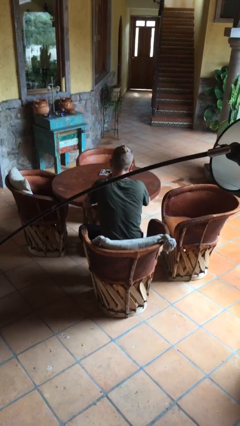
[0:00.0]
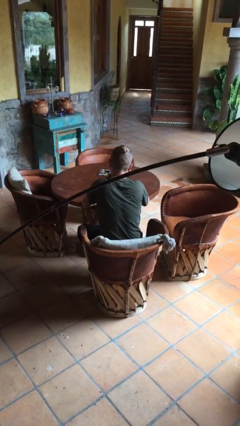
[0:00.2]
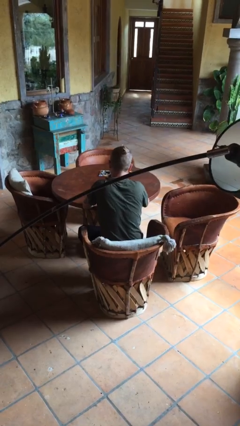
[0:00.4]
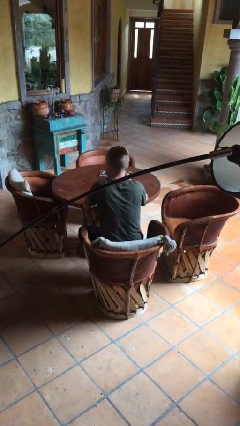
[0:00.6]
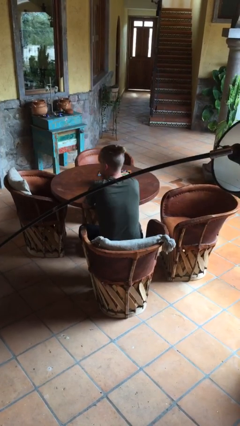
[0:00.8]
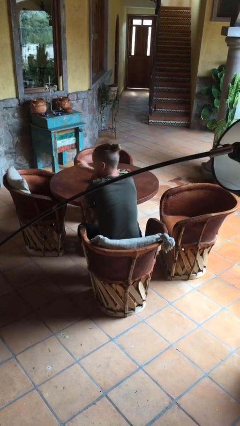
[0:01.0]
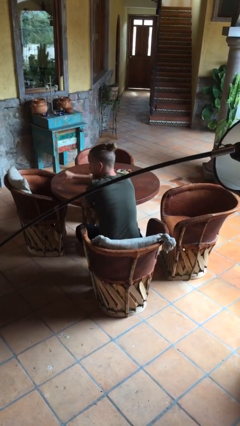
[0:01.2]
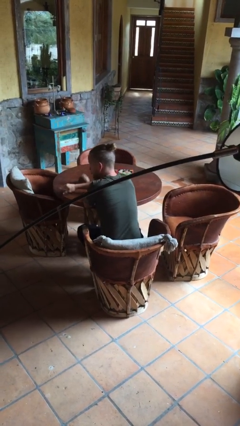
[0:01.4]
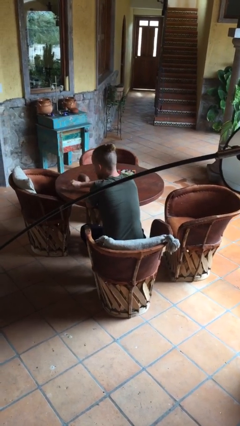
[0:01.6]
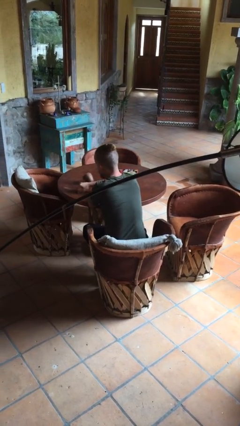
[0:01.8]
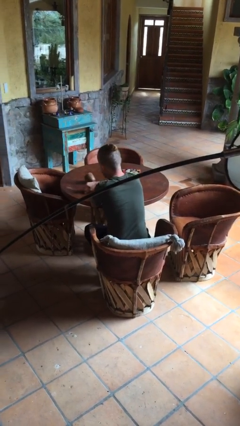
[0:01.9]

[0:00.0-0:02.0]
person knocks over glass

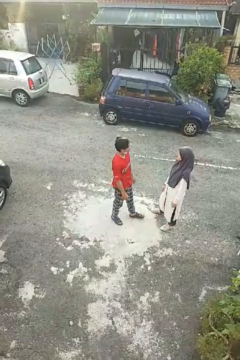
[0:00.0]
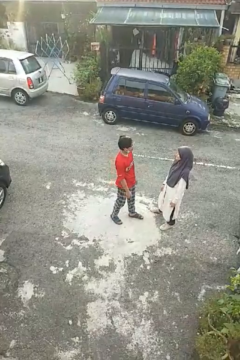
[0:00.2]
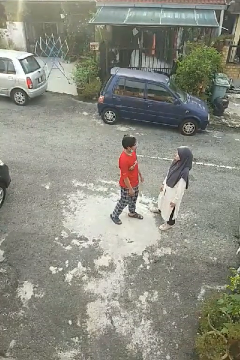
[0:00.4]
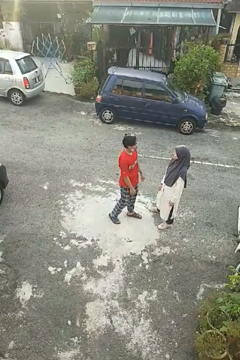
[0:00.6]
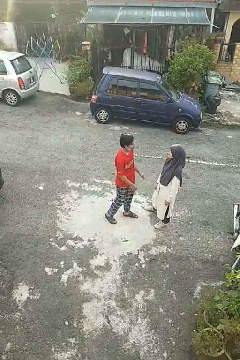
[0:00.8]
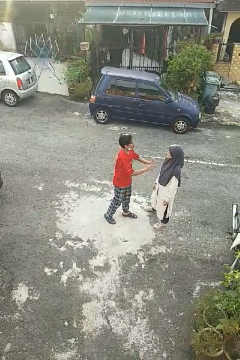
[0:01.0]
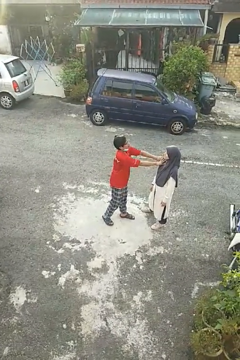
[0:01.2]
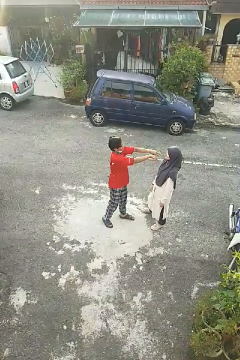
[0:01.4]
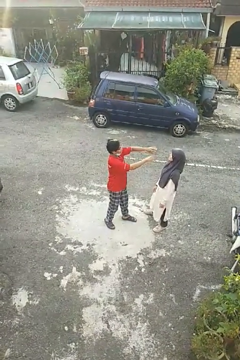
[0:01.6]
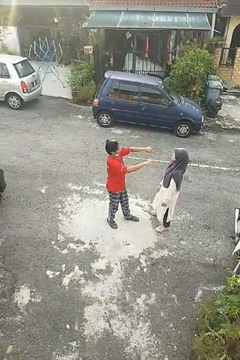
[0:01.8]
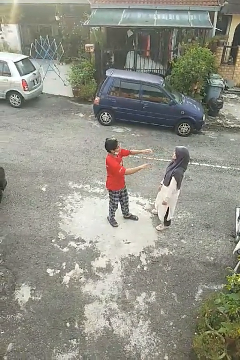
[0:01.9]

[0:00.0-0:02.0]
person shoves person

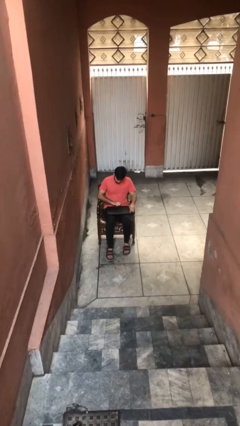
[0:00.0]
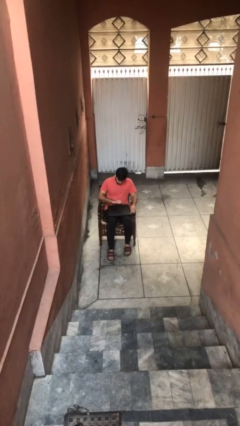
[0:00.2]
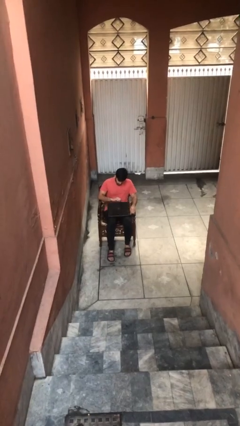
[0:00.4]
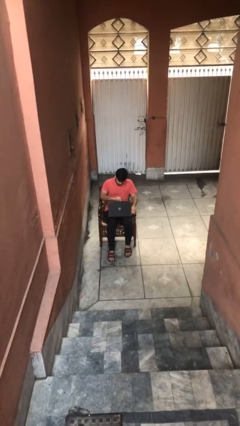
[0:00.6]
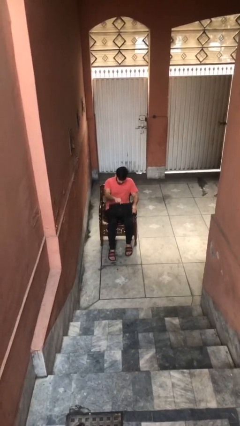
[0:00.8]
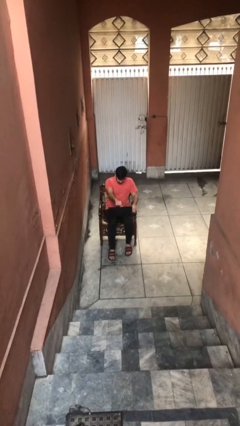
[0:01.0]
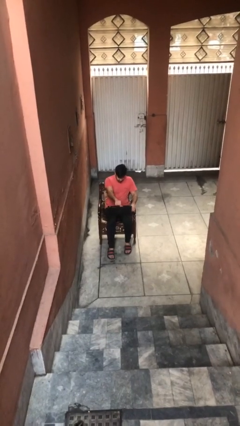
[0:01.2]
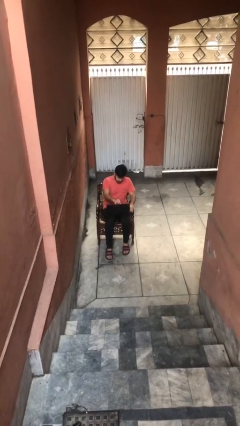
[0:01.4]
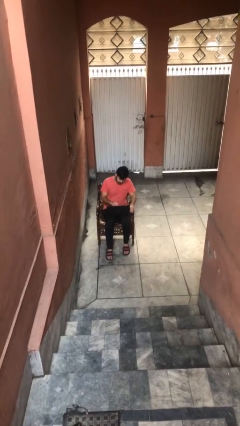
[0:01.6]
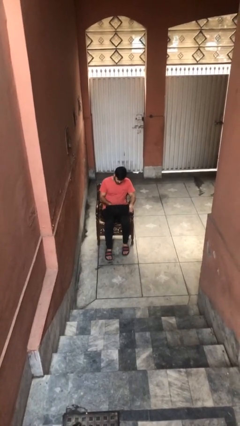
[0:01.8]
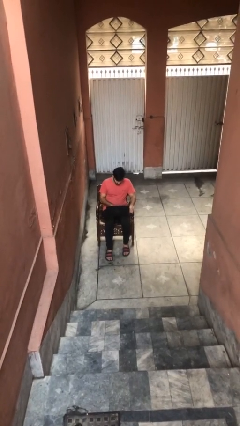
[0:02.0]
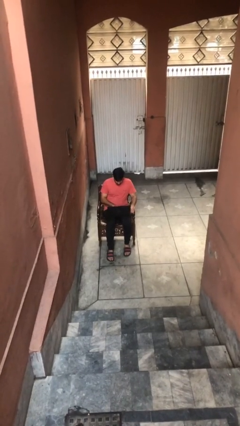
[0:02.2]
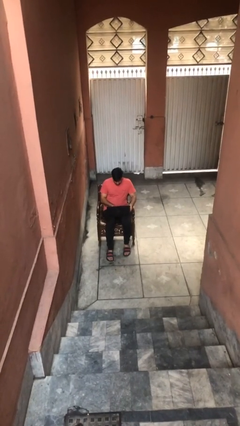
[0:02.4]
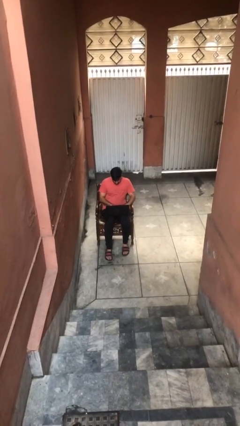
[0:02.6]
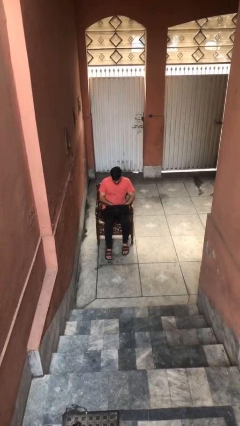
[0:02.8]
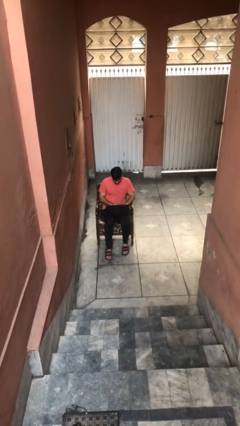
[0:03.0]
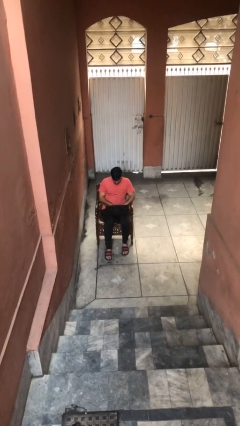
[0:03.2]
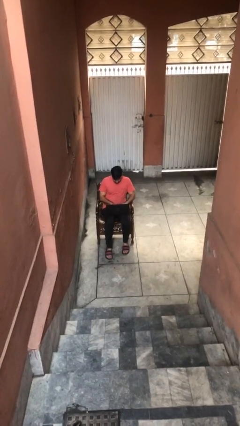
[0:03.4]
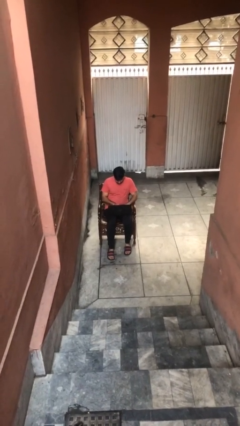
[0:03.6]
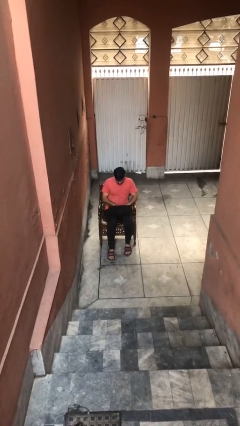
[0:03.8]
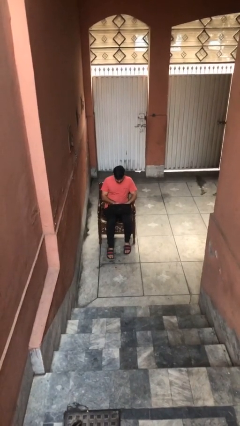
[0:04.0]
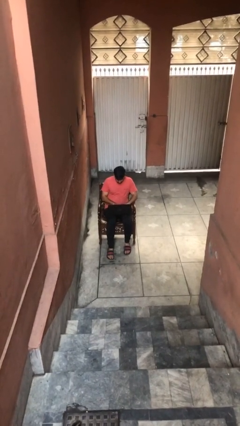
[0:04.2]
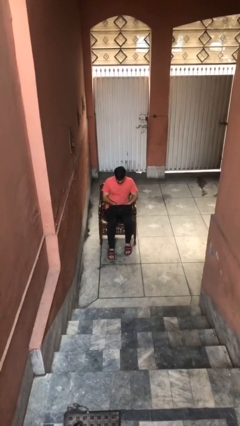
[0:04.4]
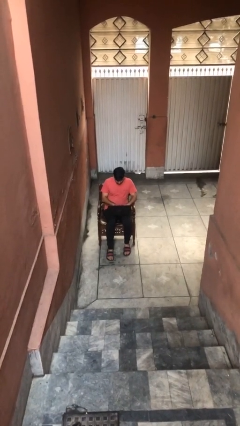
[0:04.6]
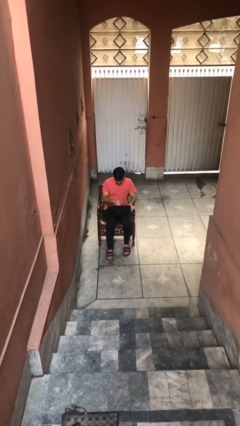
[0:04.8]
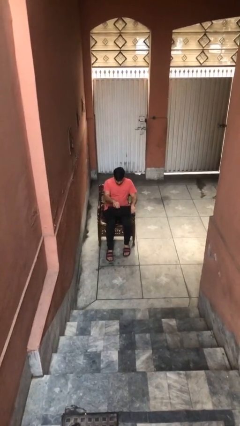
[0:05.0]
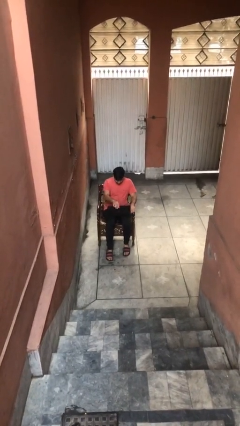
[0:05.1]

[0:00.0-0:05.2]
person interacts with laptop

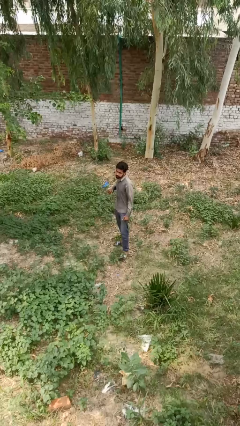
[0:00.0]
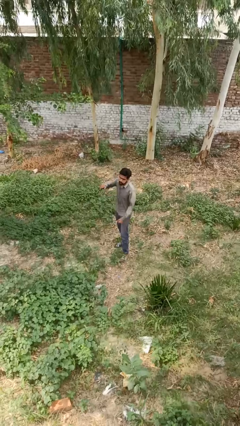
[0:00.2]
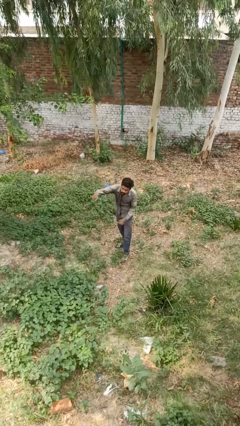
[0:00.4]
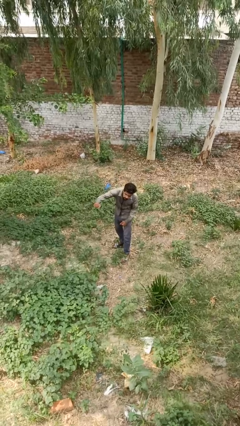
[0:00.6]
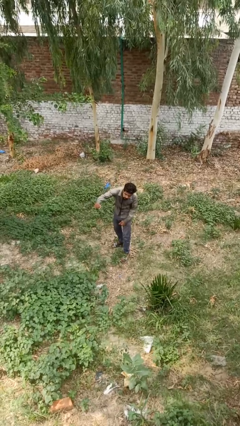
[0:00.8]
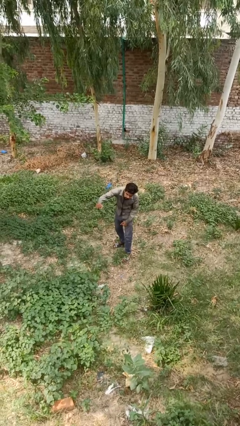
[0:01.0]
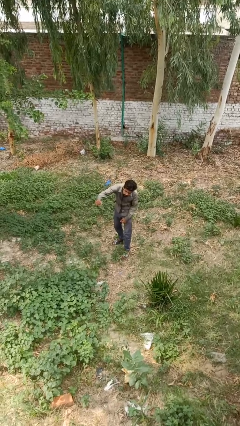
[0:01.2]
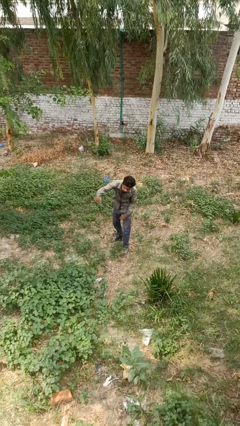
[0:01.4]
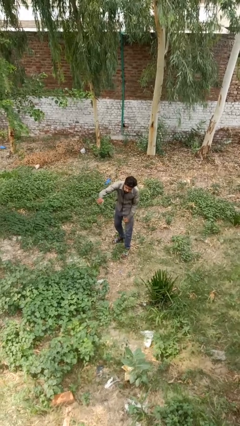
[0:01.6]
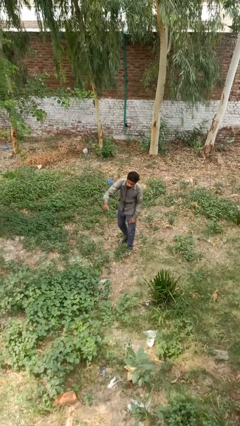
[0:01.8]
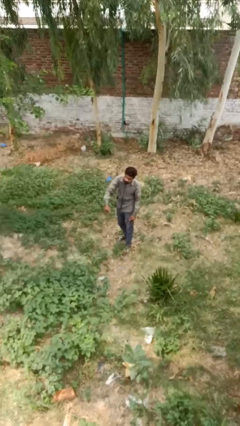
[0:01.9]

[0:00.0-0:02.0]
person punches

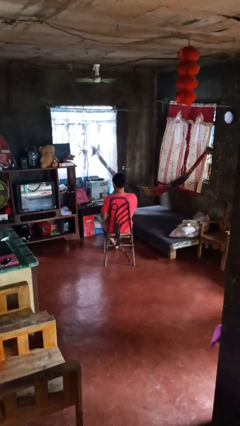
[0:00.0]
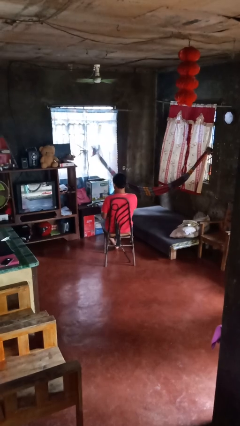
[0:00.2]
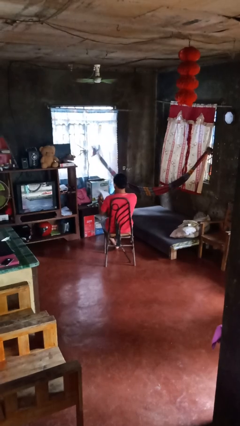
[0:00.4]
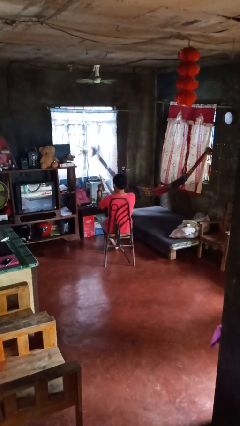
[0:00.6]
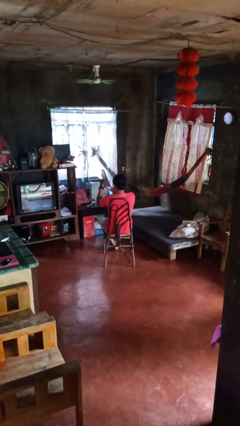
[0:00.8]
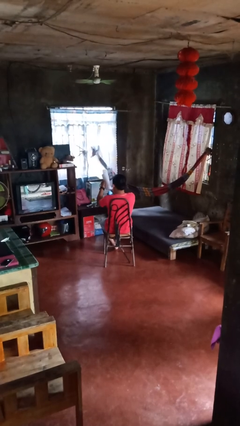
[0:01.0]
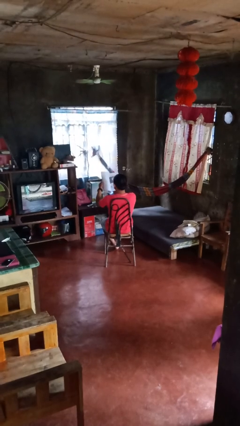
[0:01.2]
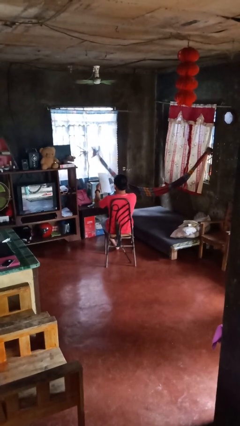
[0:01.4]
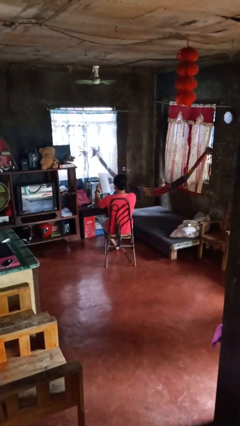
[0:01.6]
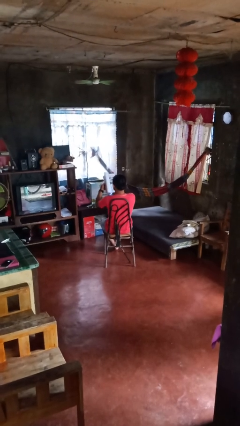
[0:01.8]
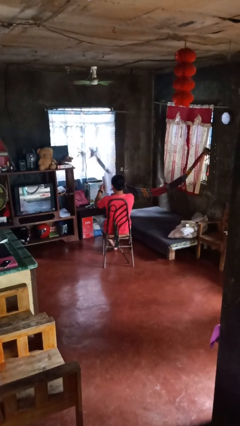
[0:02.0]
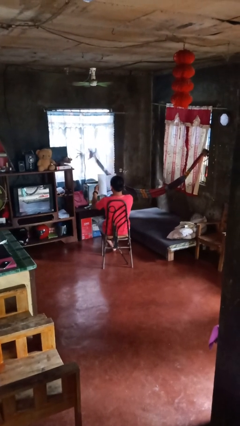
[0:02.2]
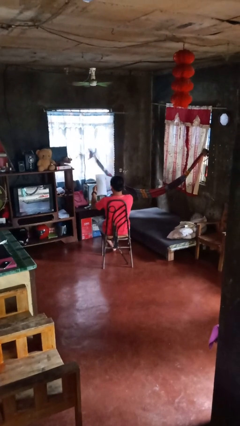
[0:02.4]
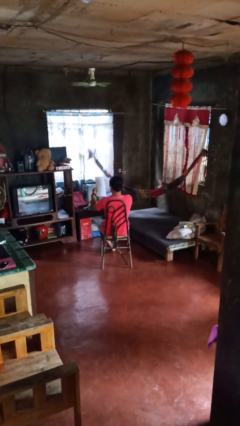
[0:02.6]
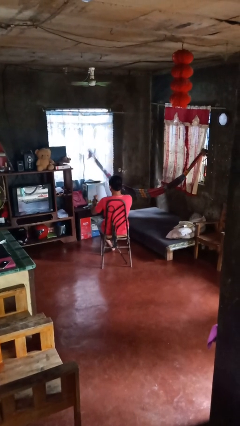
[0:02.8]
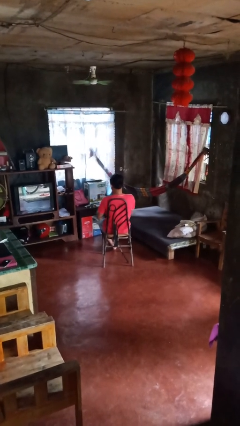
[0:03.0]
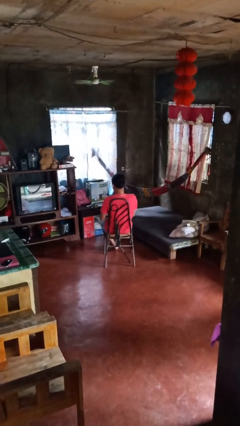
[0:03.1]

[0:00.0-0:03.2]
person reads newspaper

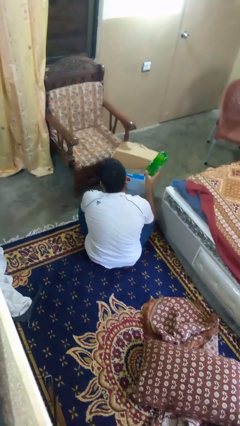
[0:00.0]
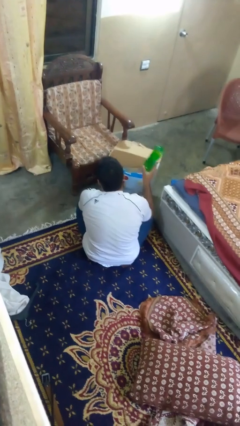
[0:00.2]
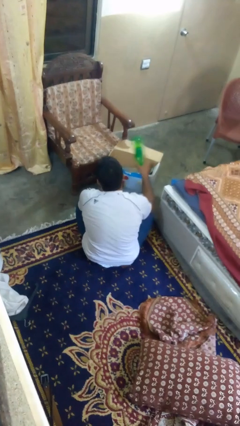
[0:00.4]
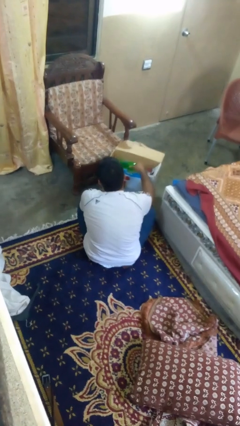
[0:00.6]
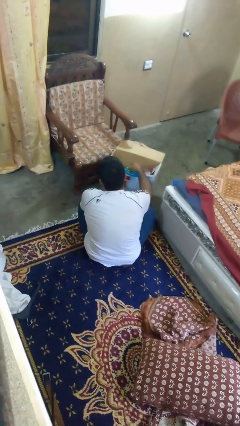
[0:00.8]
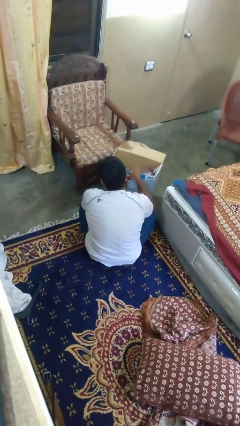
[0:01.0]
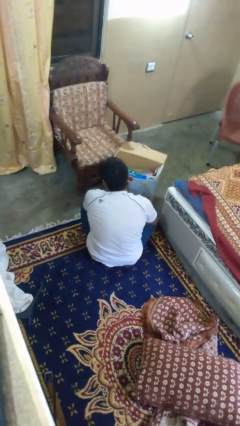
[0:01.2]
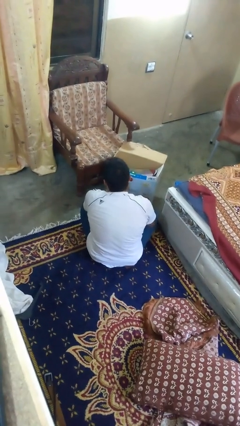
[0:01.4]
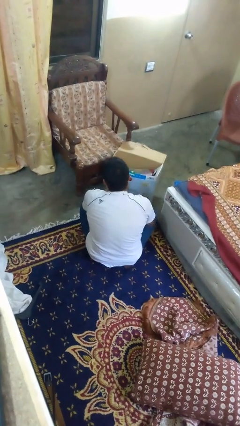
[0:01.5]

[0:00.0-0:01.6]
person puts object into box

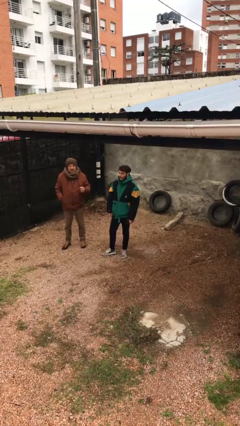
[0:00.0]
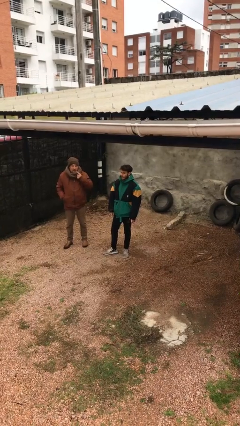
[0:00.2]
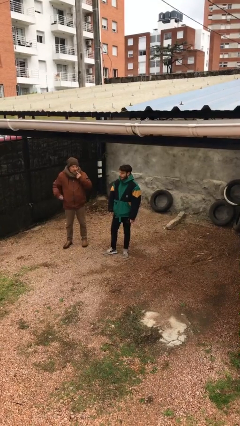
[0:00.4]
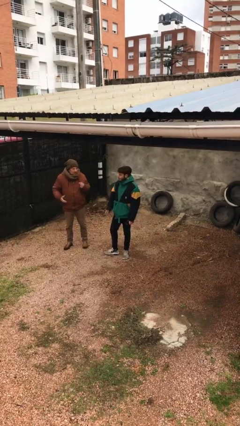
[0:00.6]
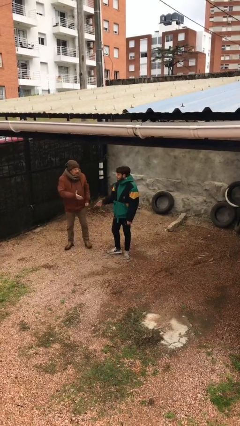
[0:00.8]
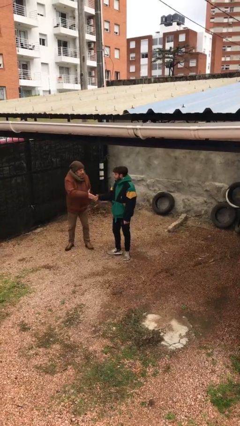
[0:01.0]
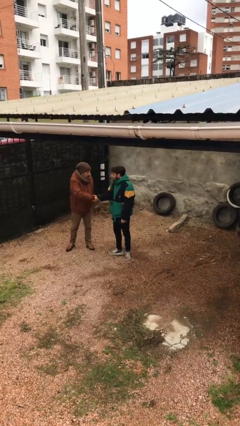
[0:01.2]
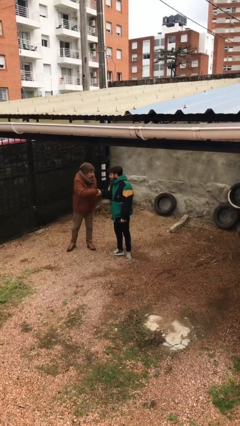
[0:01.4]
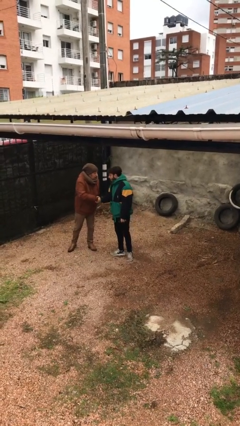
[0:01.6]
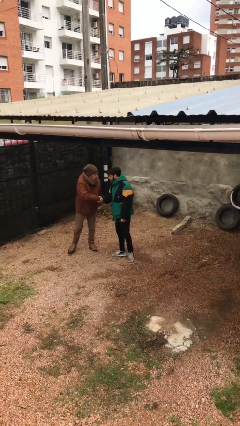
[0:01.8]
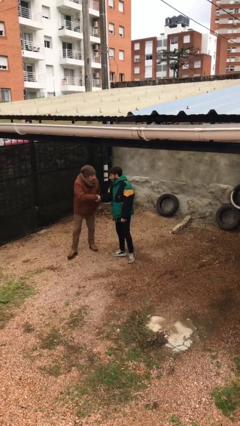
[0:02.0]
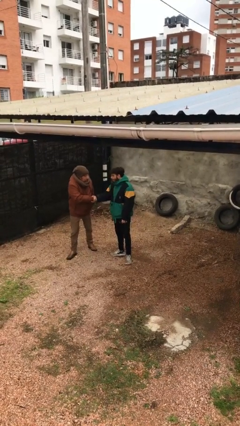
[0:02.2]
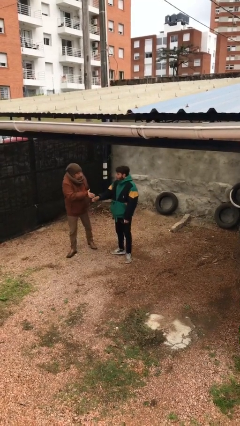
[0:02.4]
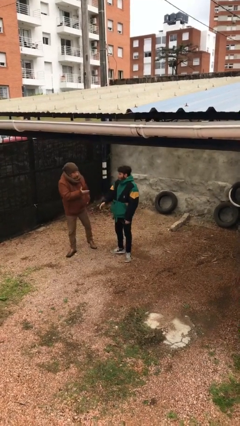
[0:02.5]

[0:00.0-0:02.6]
person shakes hand
